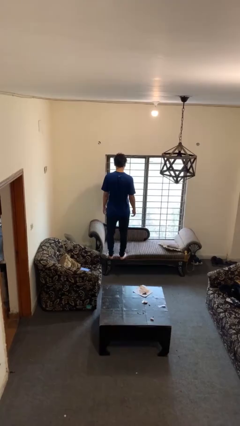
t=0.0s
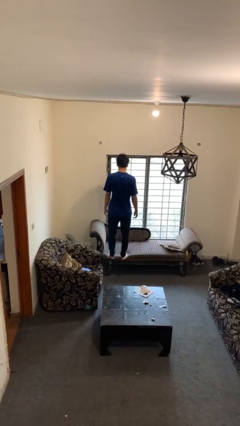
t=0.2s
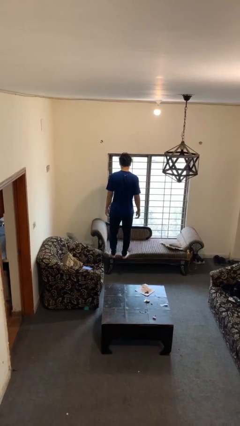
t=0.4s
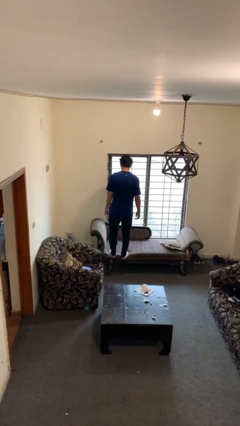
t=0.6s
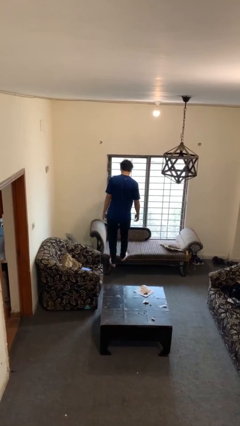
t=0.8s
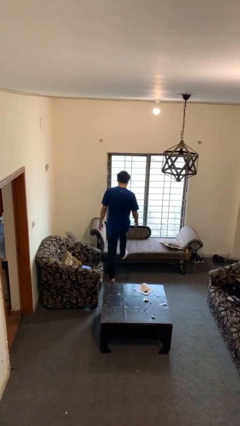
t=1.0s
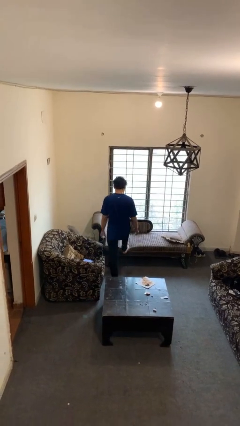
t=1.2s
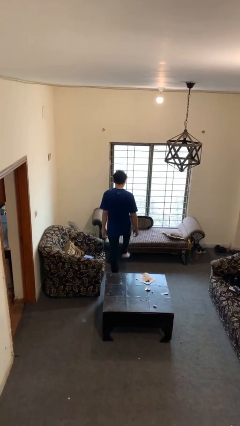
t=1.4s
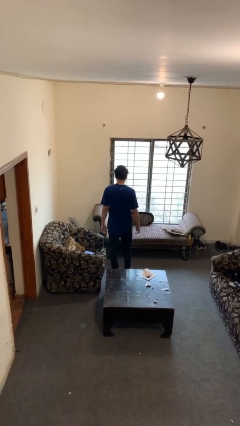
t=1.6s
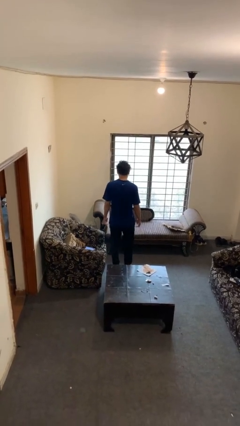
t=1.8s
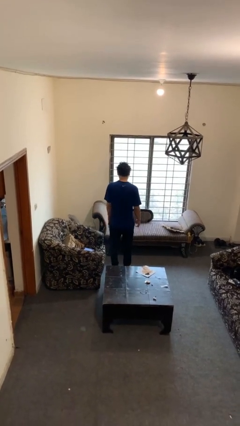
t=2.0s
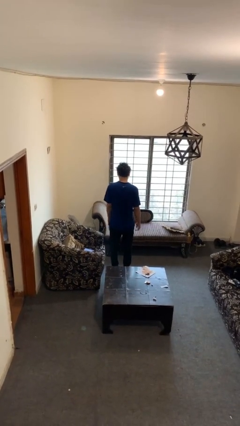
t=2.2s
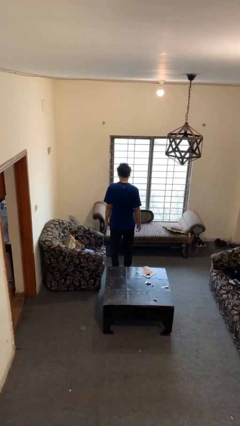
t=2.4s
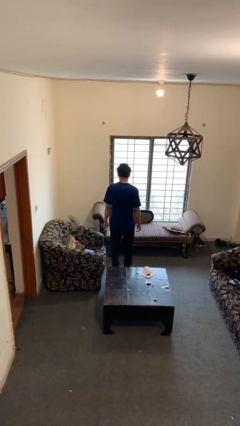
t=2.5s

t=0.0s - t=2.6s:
person climbs off couch

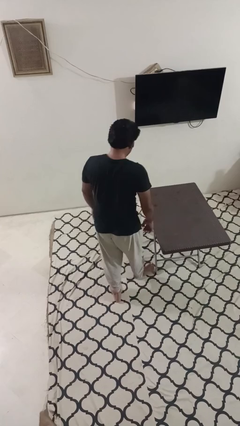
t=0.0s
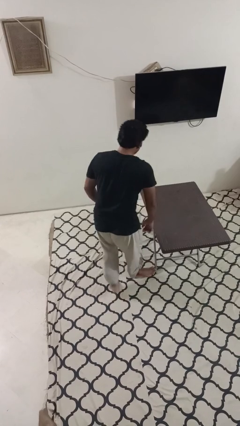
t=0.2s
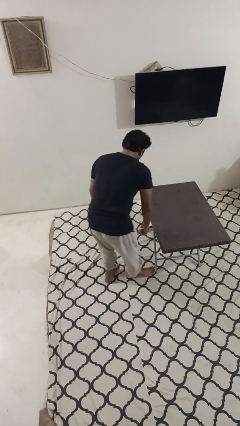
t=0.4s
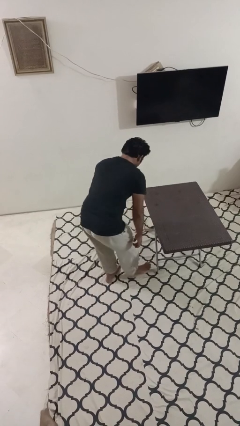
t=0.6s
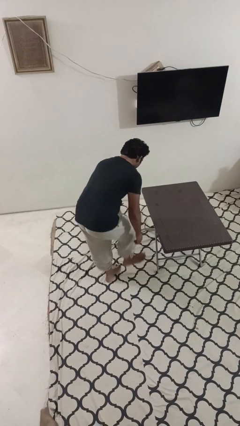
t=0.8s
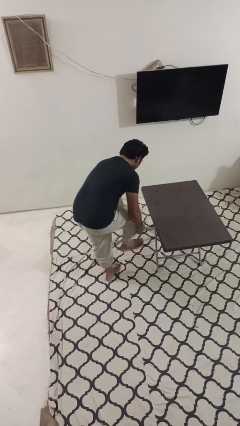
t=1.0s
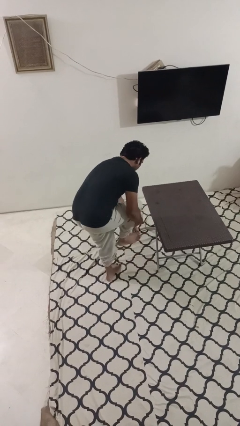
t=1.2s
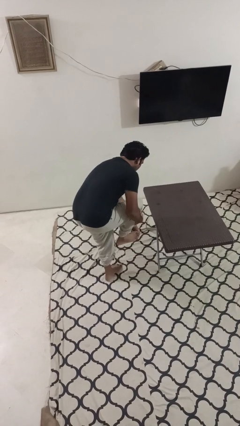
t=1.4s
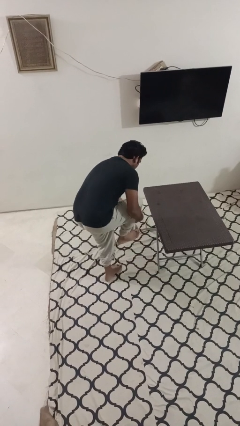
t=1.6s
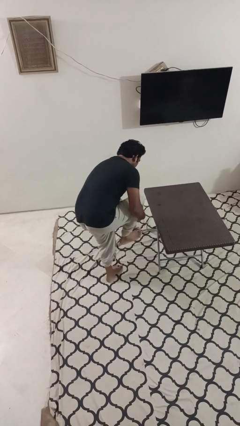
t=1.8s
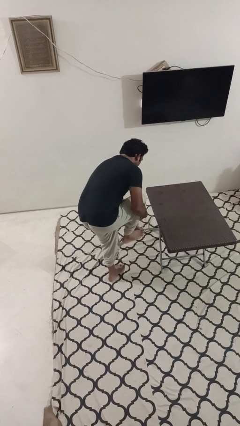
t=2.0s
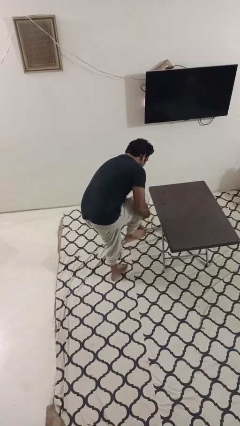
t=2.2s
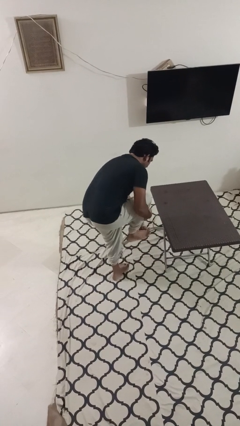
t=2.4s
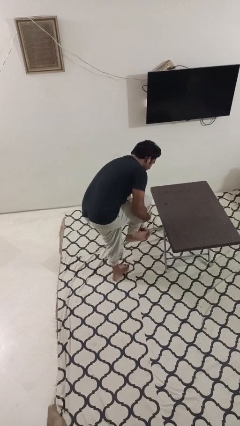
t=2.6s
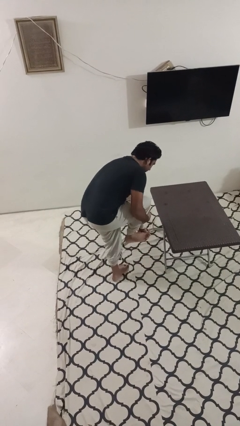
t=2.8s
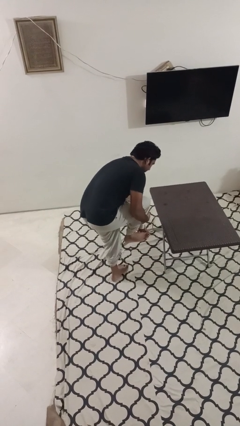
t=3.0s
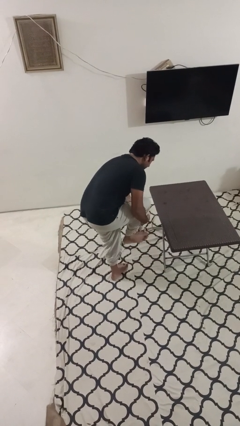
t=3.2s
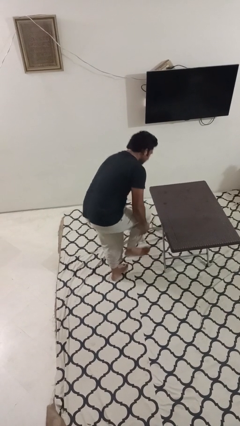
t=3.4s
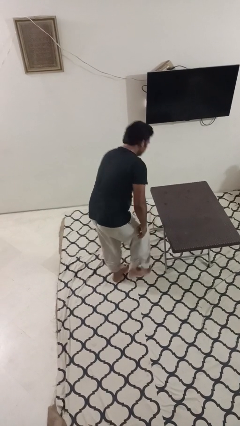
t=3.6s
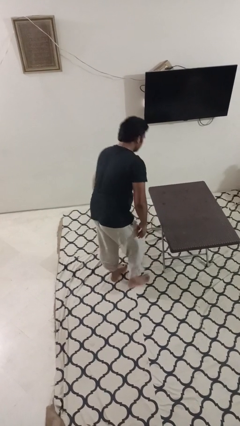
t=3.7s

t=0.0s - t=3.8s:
person stubs toe

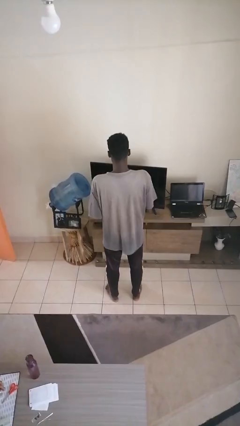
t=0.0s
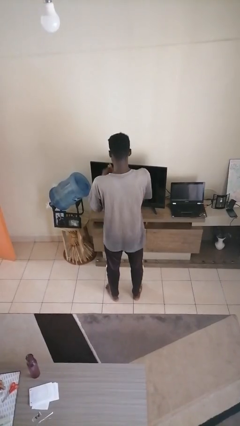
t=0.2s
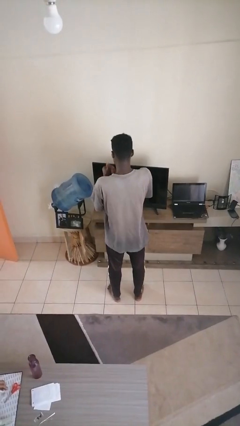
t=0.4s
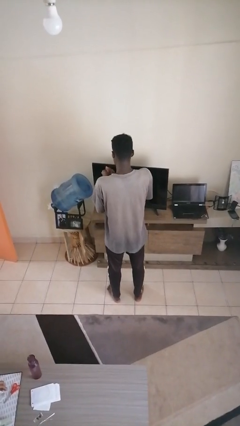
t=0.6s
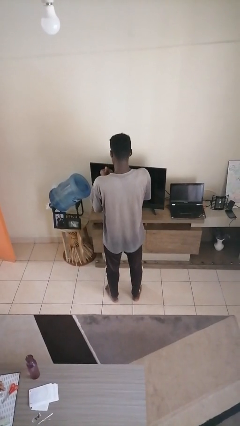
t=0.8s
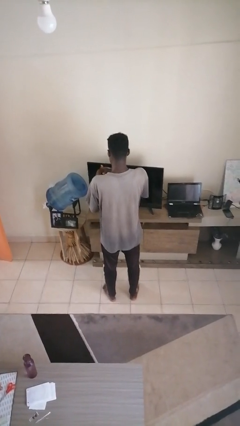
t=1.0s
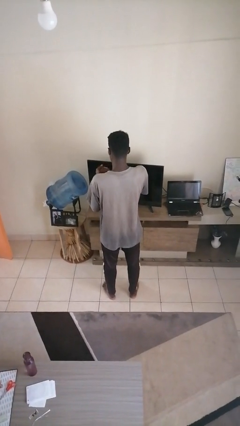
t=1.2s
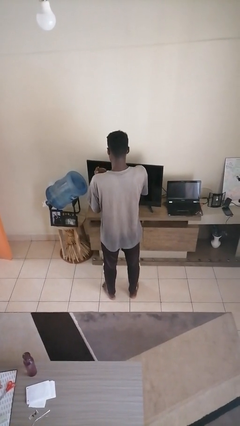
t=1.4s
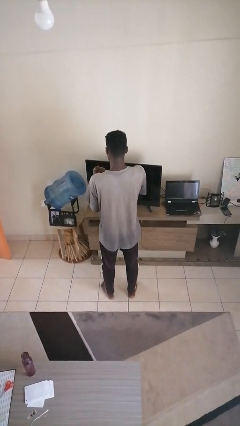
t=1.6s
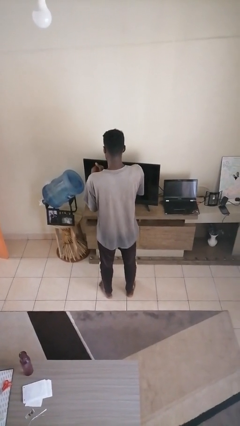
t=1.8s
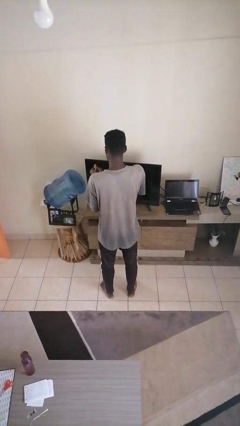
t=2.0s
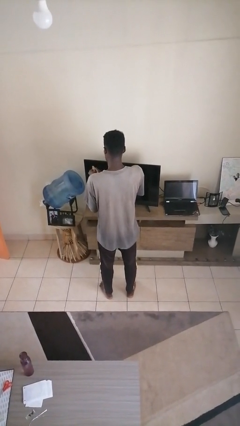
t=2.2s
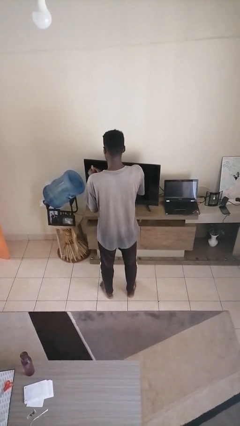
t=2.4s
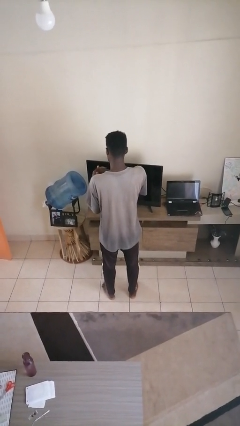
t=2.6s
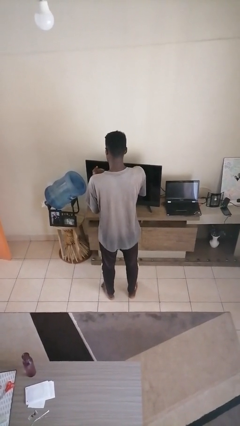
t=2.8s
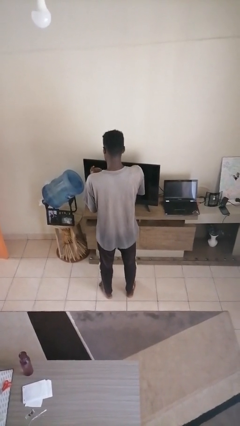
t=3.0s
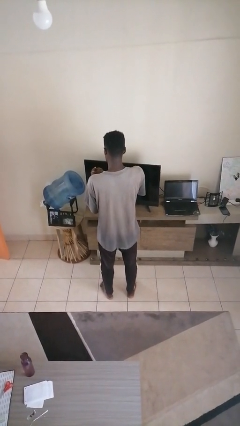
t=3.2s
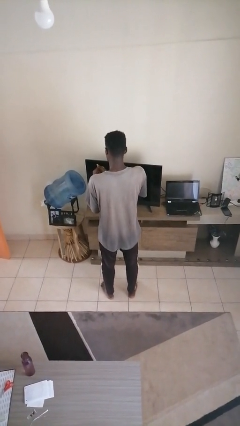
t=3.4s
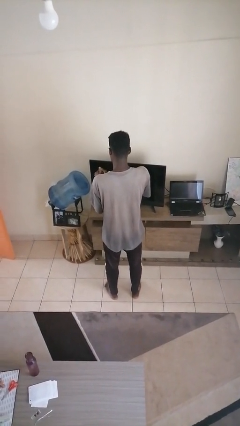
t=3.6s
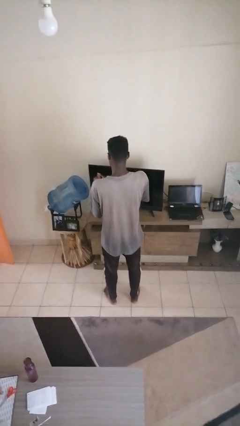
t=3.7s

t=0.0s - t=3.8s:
person cracks knuckles

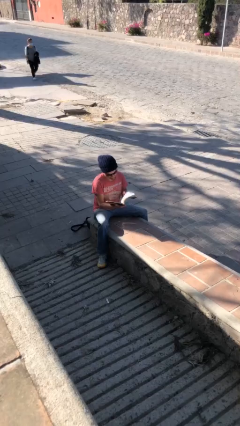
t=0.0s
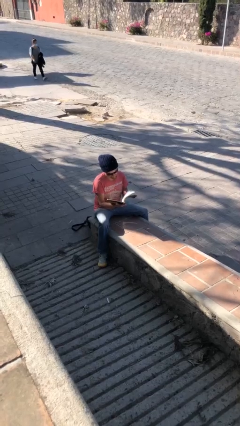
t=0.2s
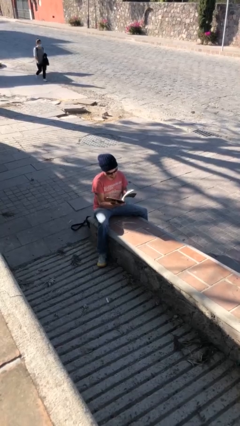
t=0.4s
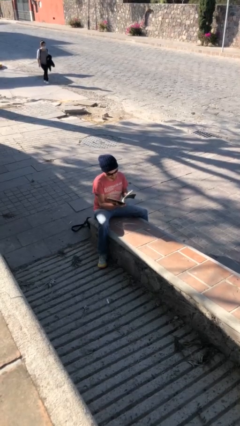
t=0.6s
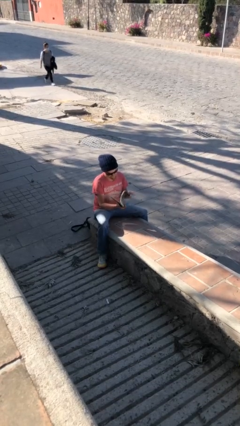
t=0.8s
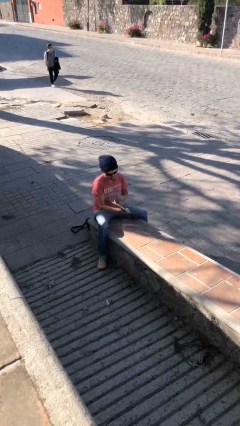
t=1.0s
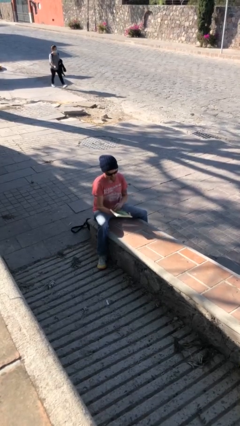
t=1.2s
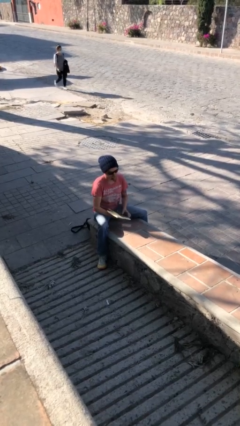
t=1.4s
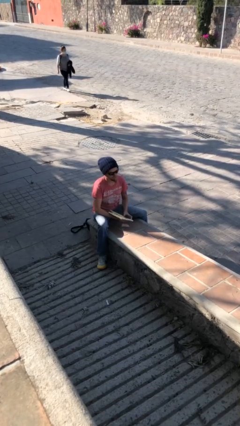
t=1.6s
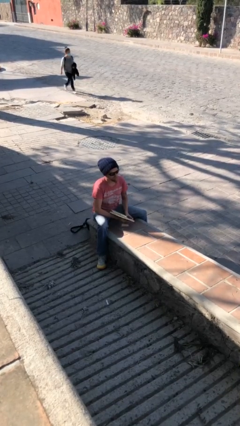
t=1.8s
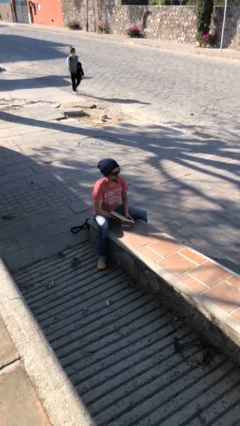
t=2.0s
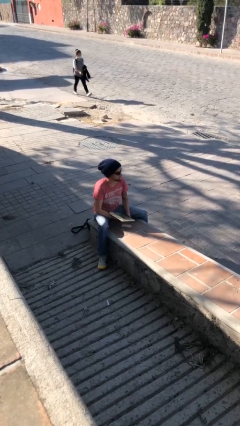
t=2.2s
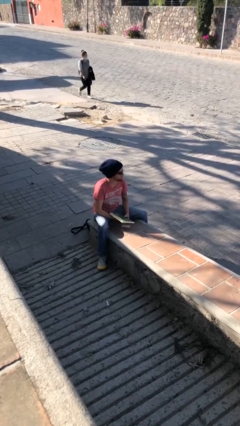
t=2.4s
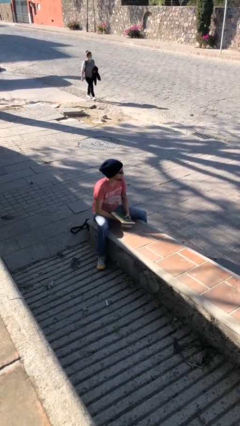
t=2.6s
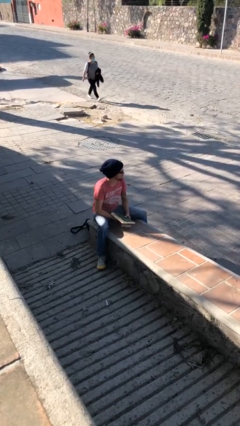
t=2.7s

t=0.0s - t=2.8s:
person reads document

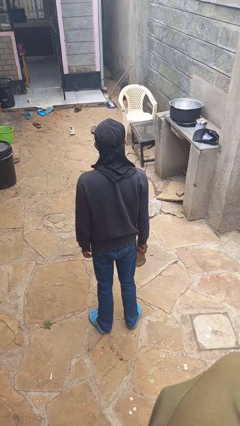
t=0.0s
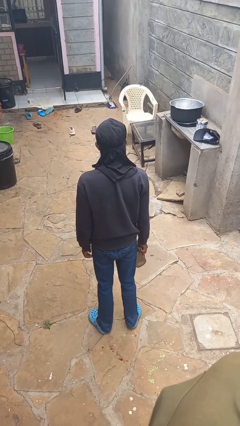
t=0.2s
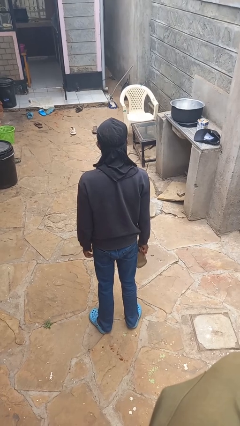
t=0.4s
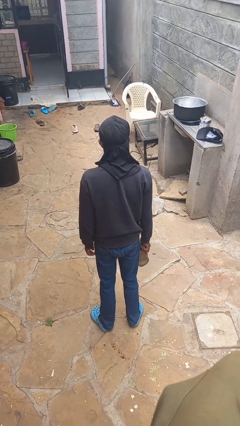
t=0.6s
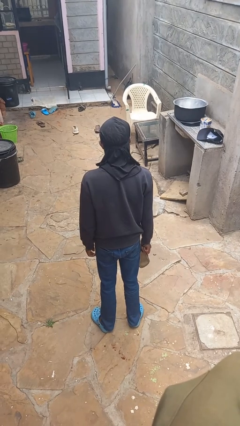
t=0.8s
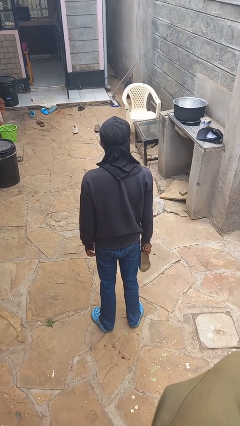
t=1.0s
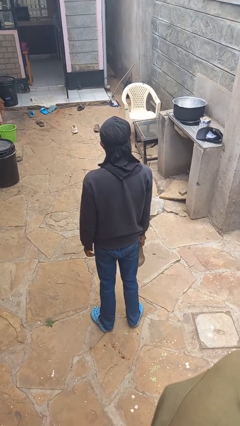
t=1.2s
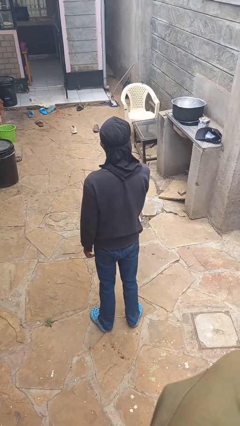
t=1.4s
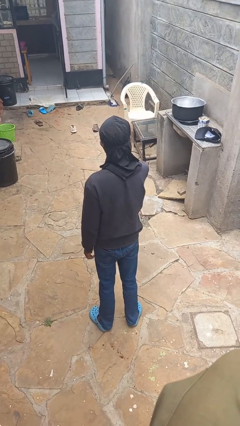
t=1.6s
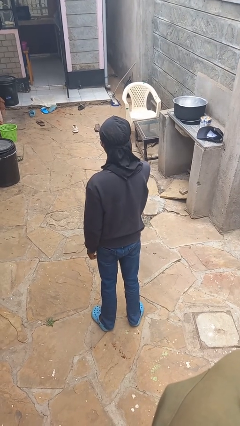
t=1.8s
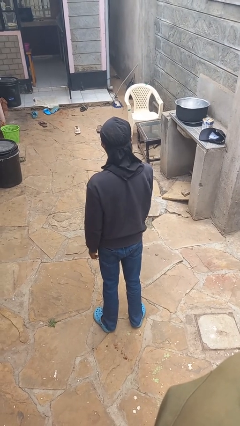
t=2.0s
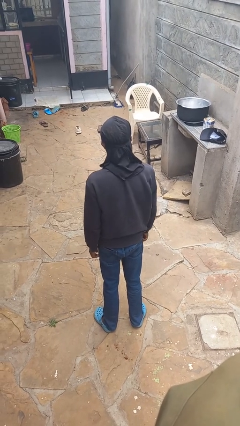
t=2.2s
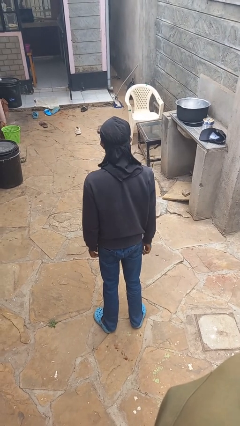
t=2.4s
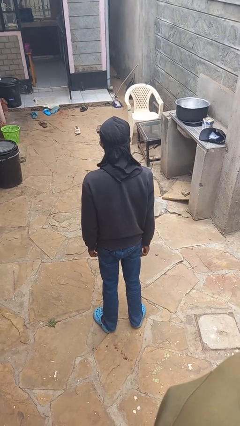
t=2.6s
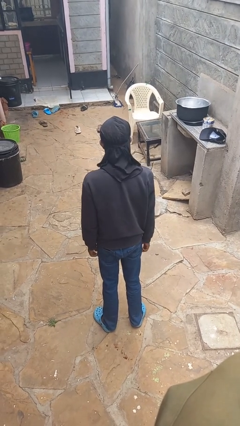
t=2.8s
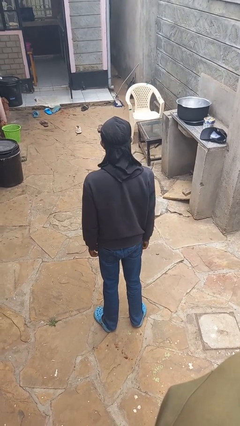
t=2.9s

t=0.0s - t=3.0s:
person throws object to ground

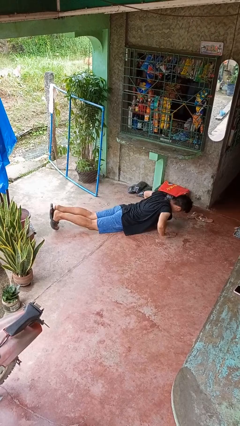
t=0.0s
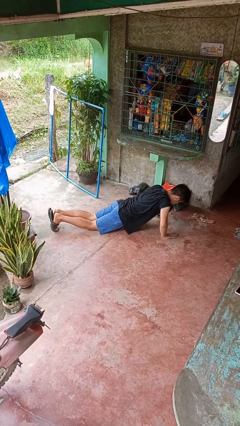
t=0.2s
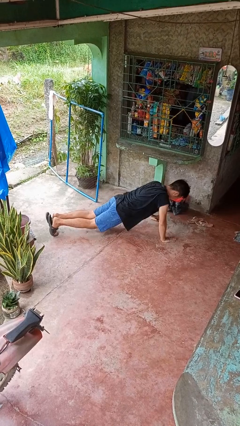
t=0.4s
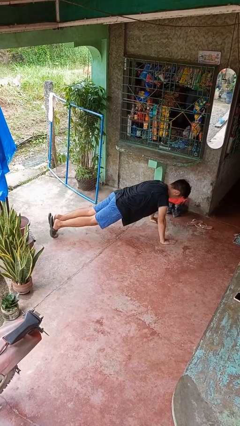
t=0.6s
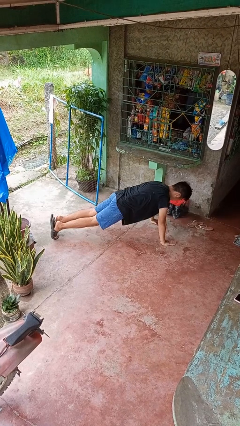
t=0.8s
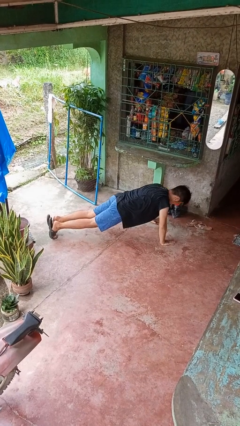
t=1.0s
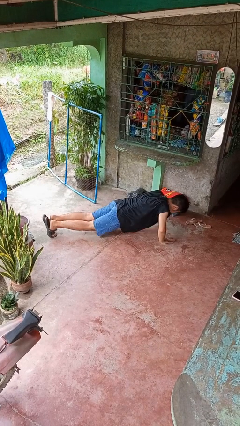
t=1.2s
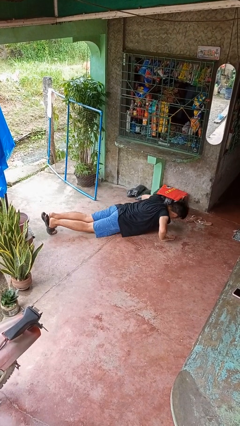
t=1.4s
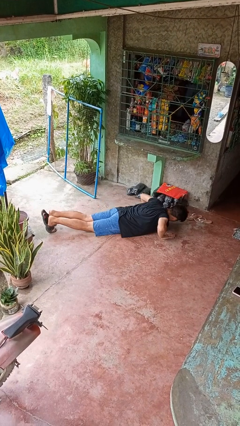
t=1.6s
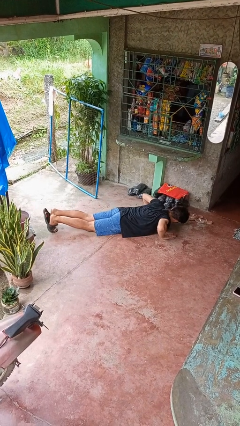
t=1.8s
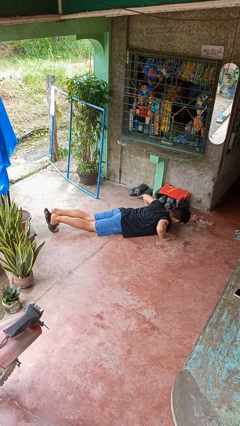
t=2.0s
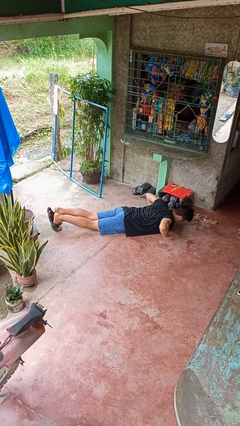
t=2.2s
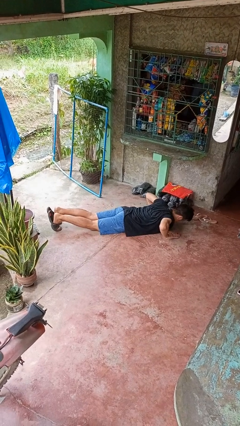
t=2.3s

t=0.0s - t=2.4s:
person exercises with pushup
